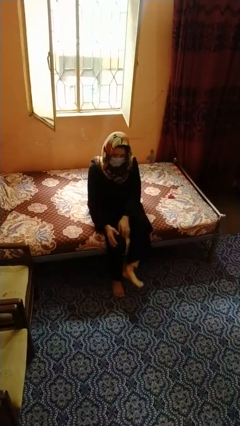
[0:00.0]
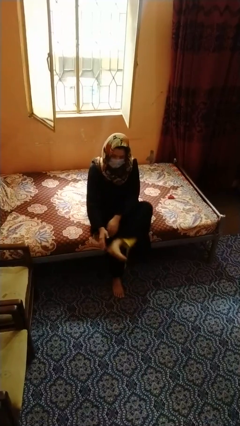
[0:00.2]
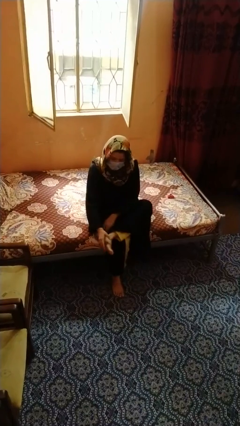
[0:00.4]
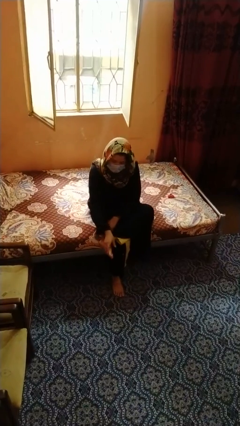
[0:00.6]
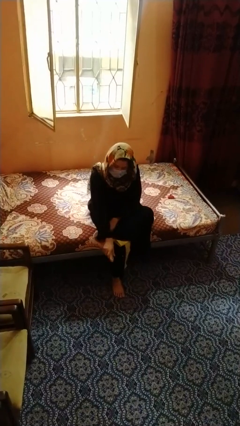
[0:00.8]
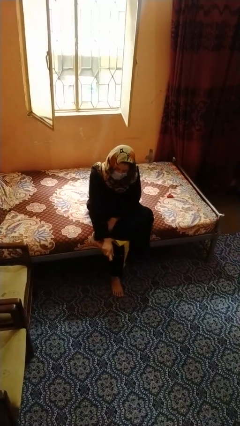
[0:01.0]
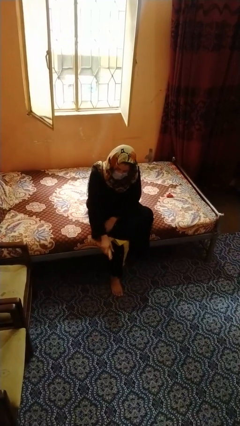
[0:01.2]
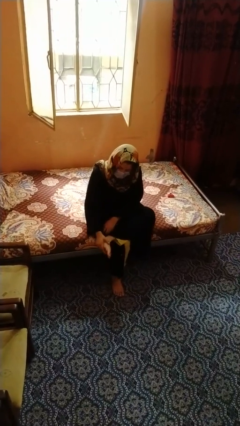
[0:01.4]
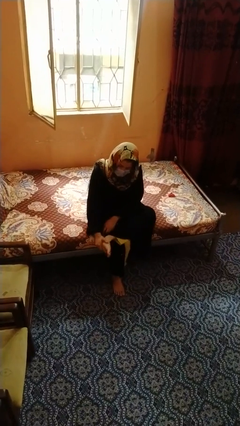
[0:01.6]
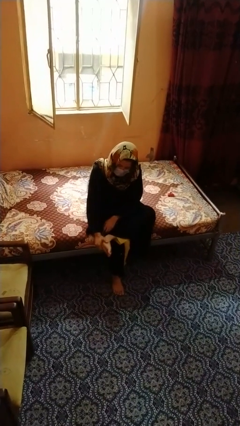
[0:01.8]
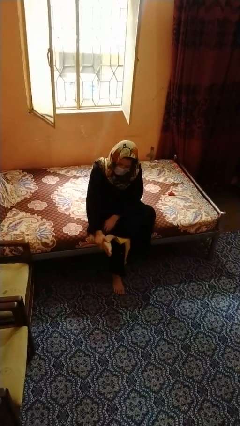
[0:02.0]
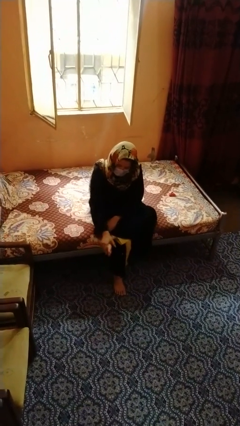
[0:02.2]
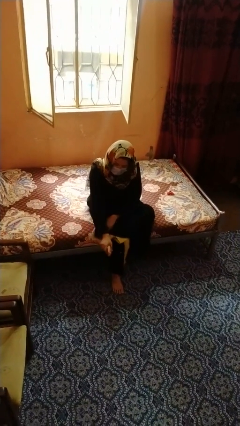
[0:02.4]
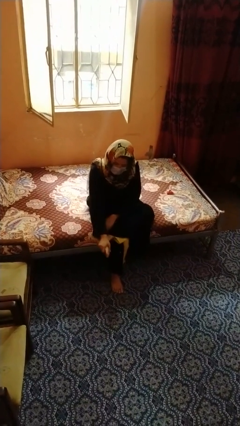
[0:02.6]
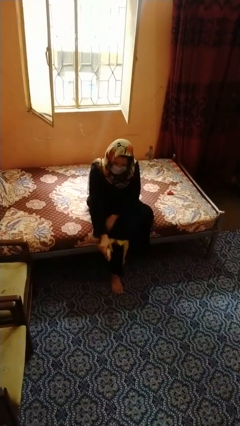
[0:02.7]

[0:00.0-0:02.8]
person rubs foot

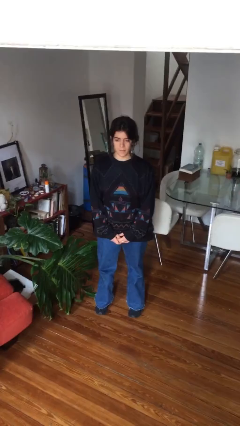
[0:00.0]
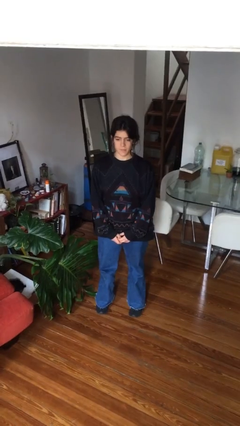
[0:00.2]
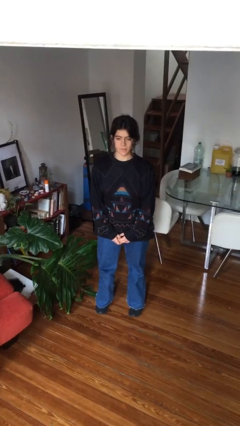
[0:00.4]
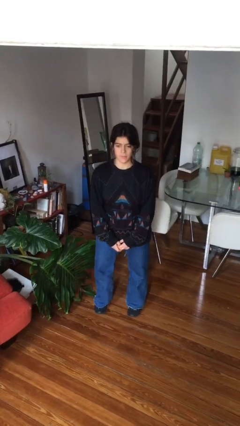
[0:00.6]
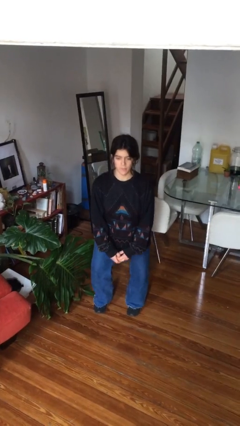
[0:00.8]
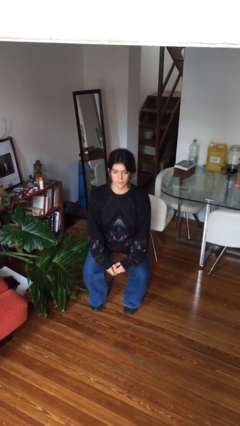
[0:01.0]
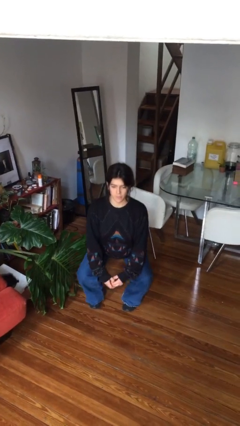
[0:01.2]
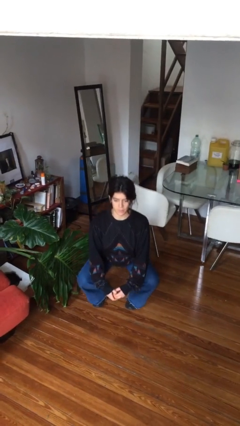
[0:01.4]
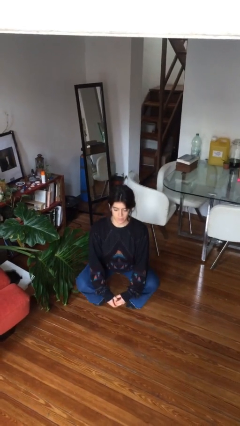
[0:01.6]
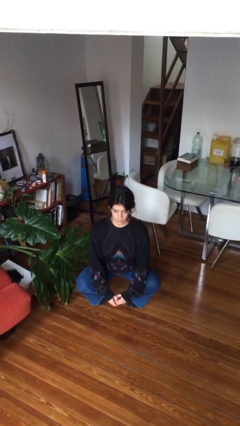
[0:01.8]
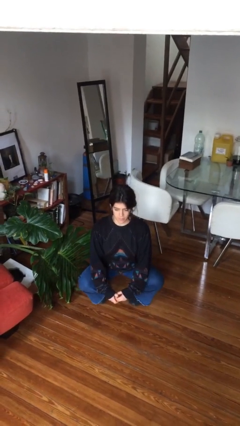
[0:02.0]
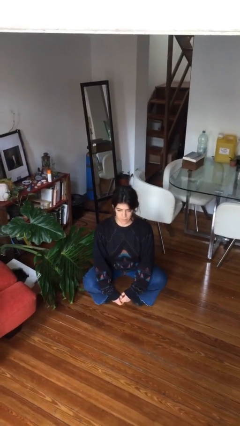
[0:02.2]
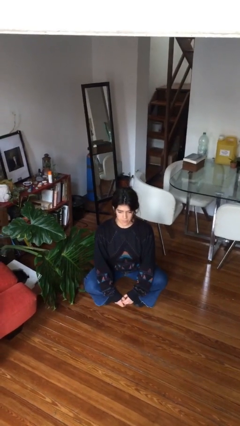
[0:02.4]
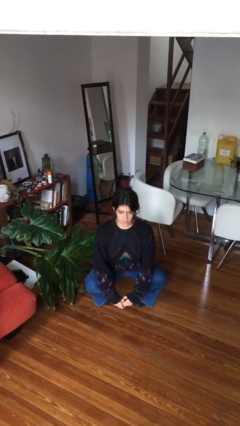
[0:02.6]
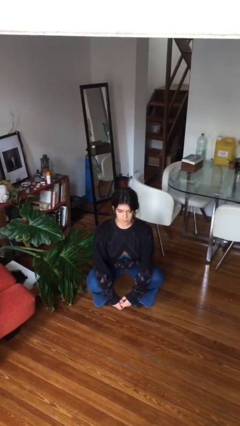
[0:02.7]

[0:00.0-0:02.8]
person squats

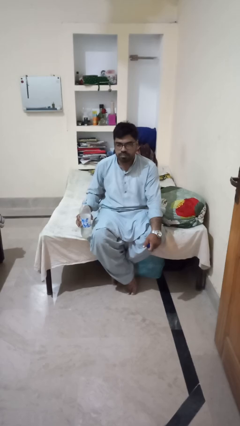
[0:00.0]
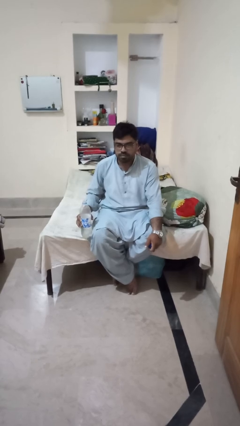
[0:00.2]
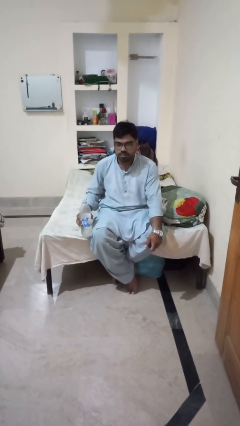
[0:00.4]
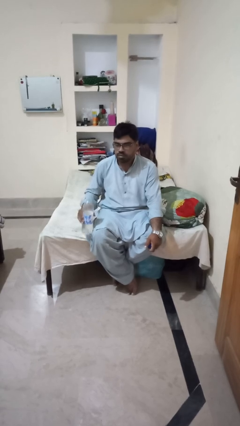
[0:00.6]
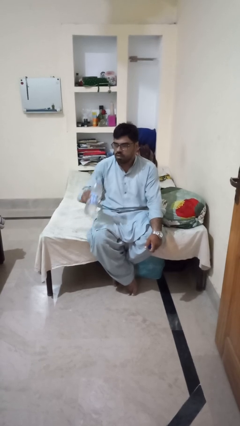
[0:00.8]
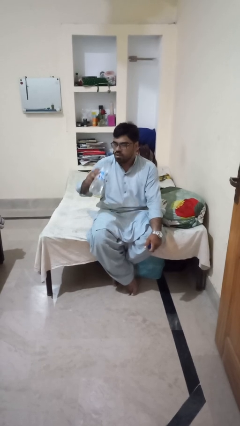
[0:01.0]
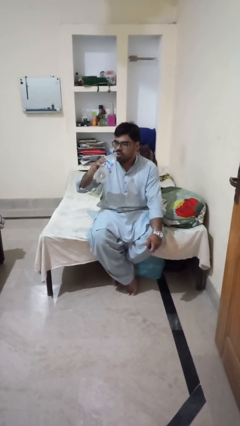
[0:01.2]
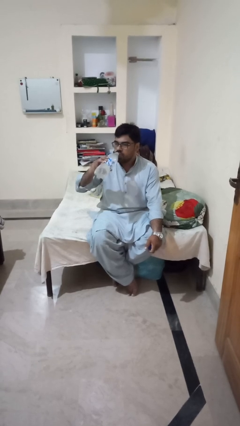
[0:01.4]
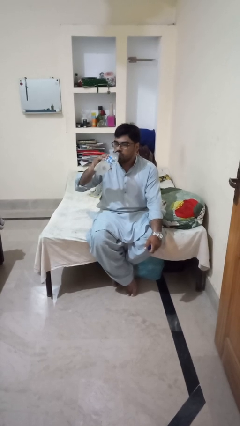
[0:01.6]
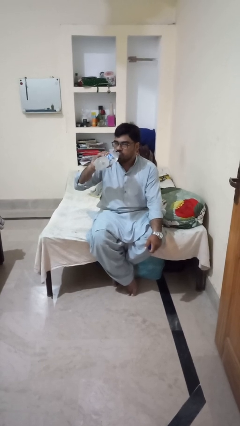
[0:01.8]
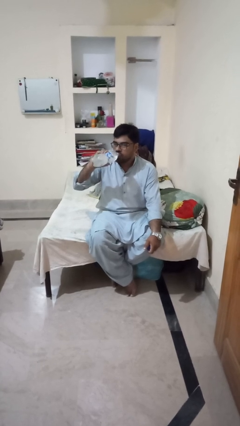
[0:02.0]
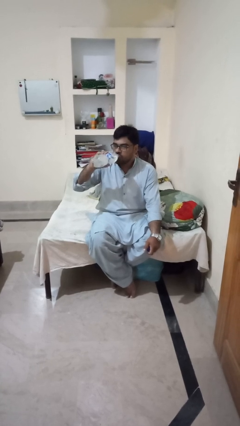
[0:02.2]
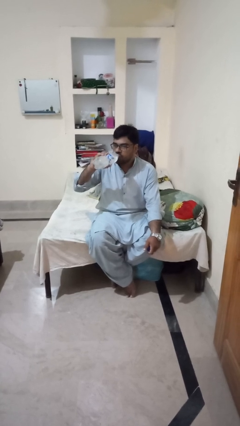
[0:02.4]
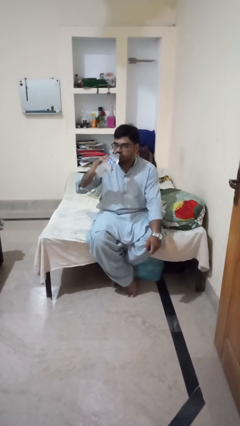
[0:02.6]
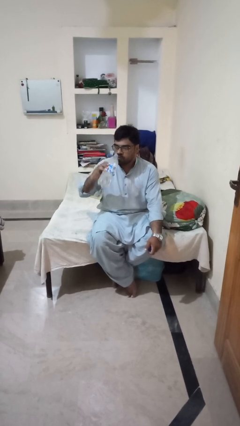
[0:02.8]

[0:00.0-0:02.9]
person drinks from bottle

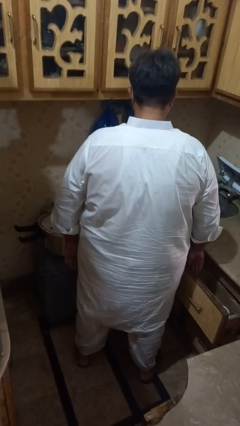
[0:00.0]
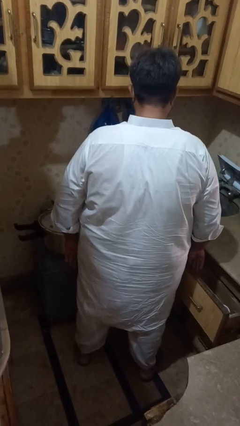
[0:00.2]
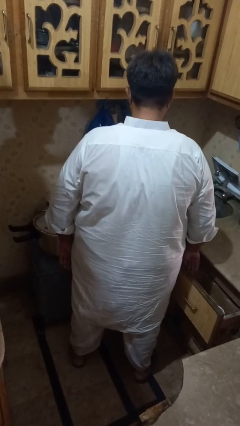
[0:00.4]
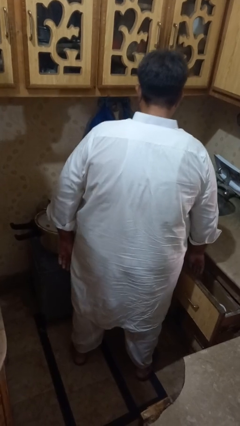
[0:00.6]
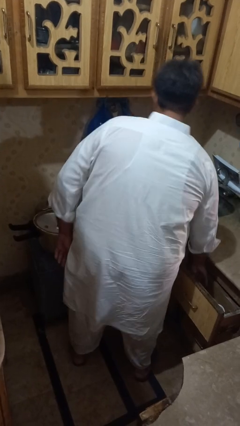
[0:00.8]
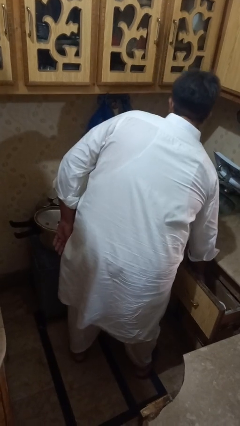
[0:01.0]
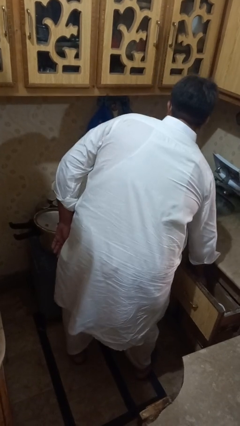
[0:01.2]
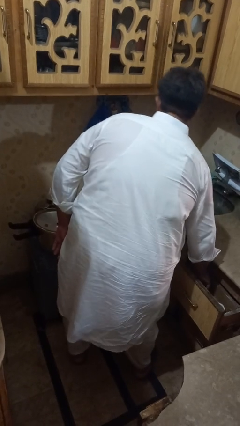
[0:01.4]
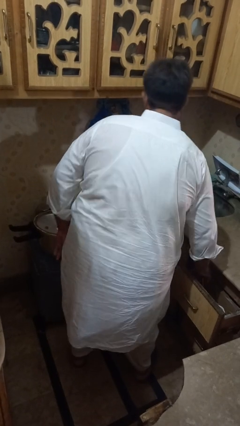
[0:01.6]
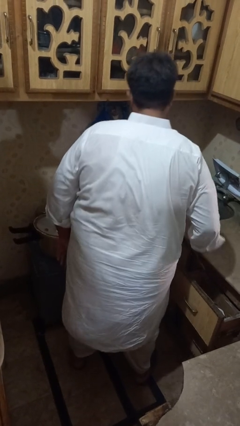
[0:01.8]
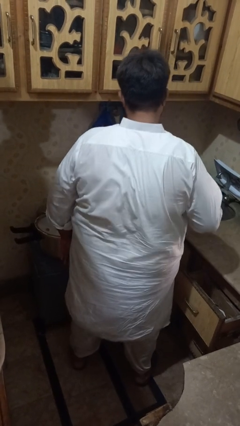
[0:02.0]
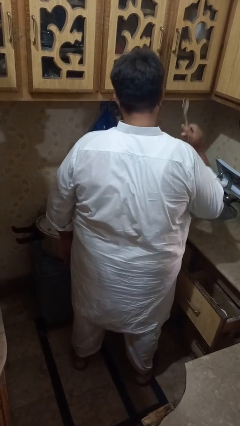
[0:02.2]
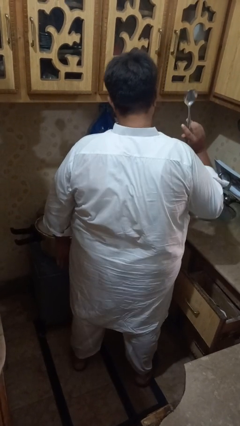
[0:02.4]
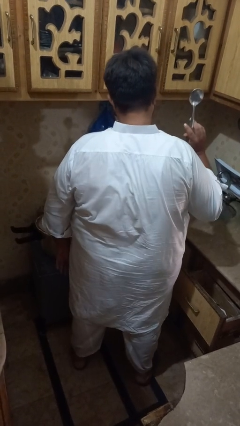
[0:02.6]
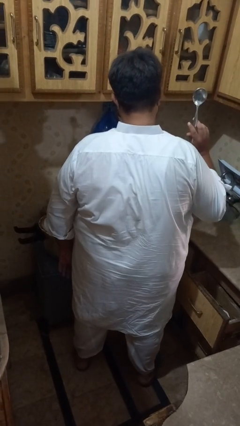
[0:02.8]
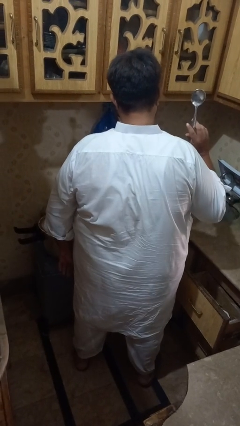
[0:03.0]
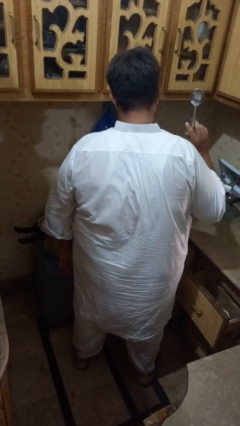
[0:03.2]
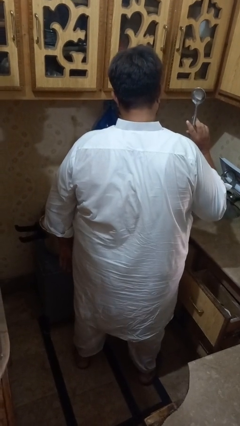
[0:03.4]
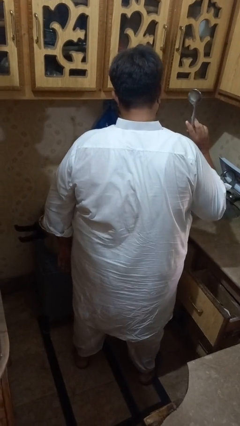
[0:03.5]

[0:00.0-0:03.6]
person takes object from kitchen drawer

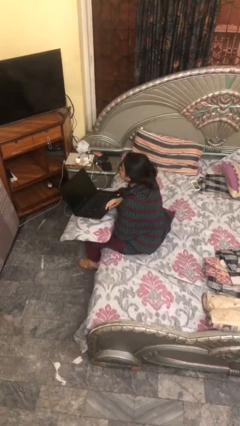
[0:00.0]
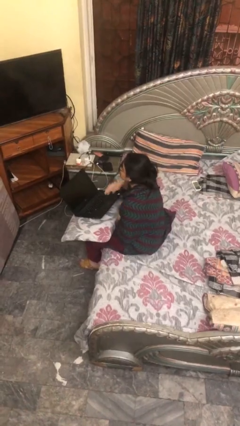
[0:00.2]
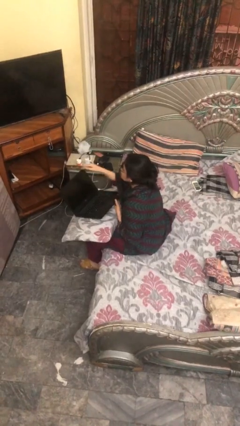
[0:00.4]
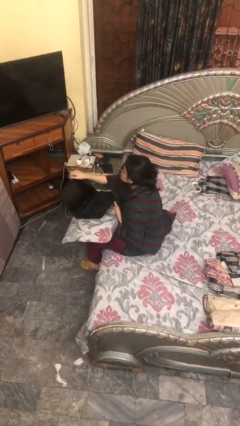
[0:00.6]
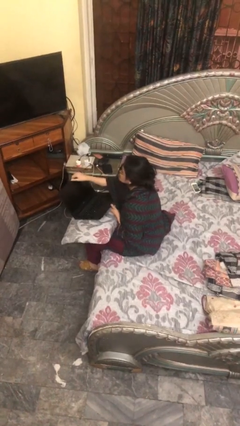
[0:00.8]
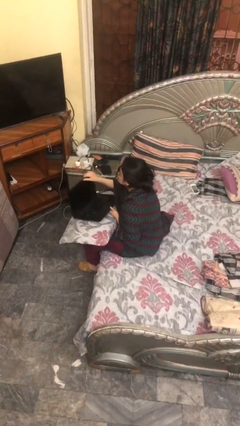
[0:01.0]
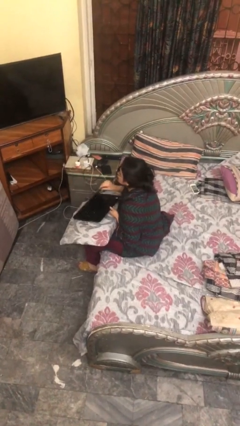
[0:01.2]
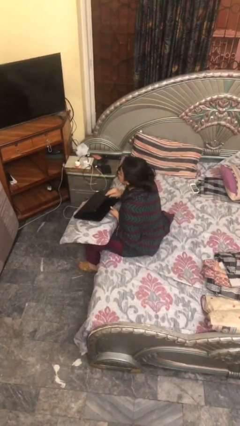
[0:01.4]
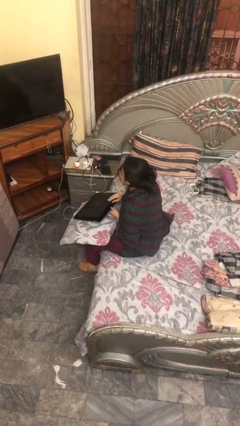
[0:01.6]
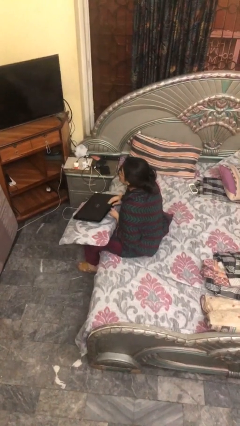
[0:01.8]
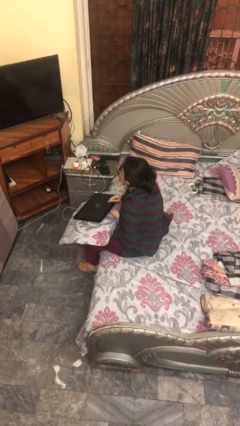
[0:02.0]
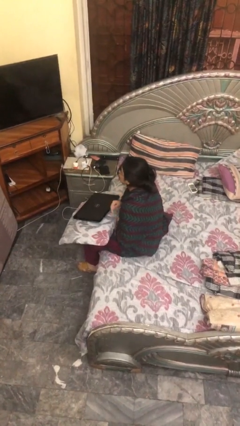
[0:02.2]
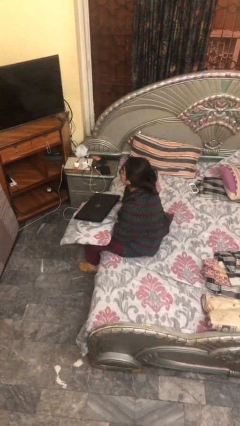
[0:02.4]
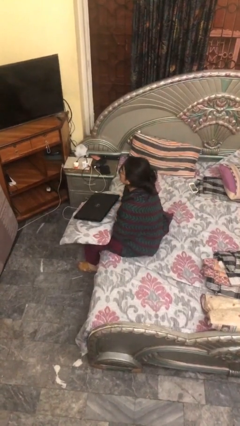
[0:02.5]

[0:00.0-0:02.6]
person closes laptop

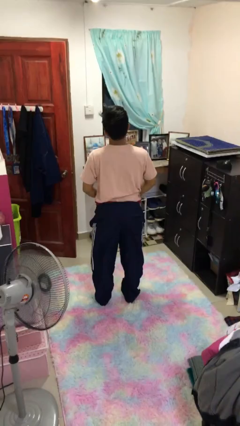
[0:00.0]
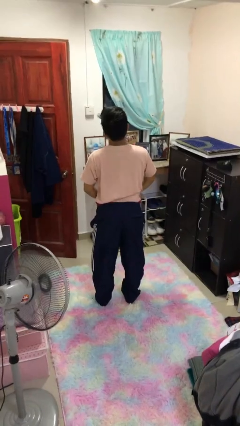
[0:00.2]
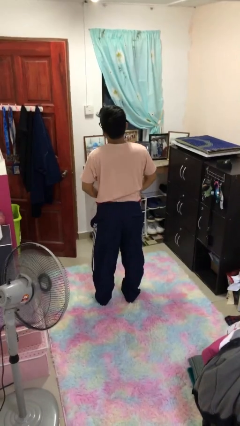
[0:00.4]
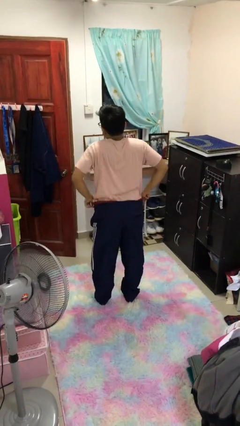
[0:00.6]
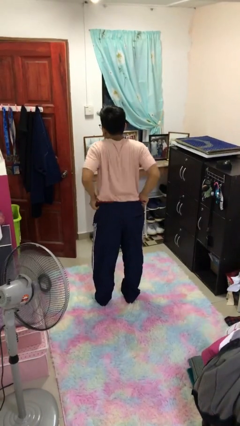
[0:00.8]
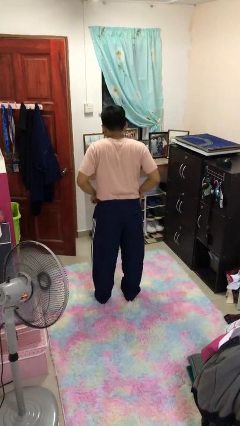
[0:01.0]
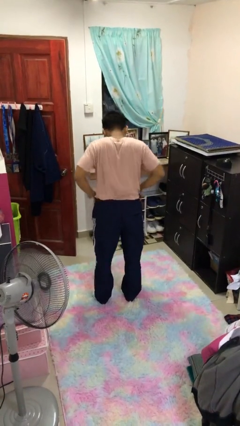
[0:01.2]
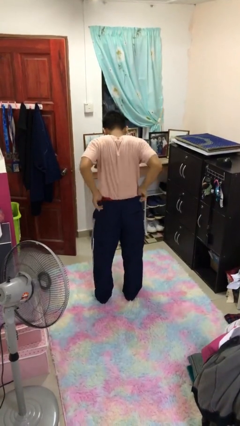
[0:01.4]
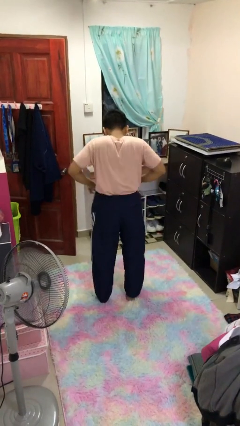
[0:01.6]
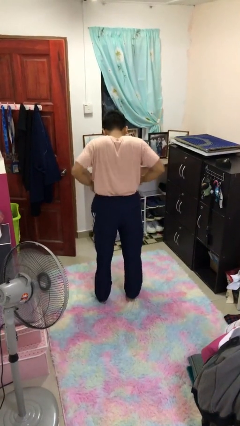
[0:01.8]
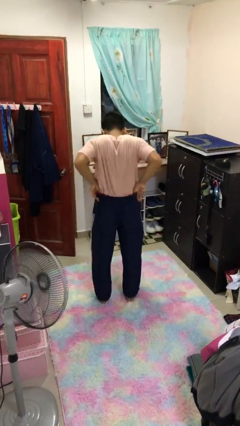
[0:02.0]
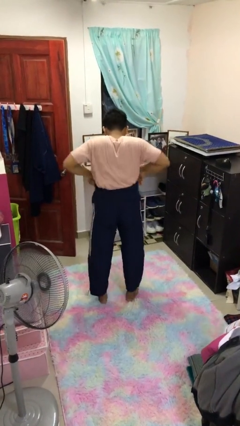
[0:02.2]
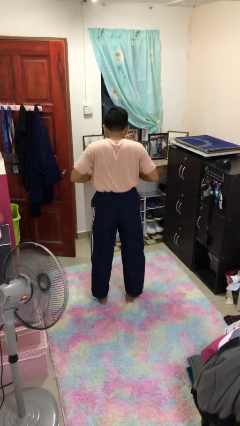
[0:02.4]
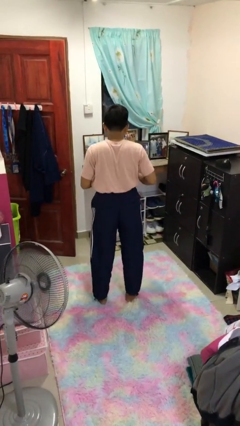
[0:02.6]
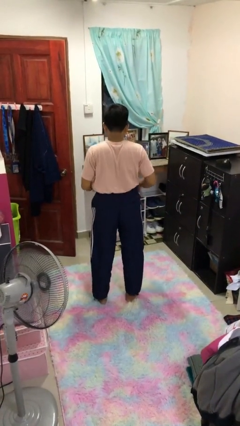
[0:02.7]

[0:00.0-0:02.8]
person hikes up pants
